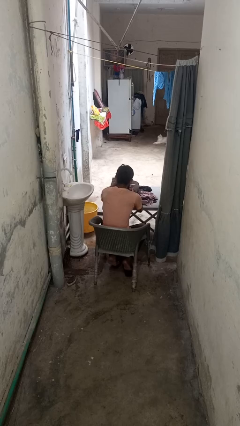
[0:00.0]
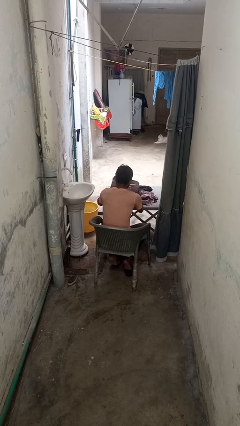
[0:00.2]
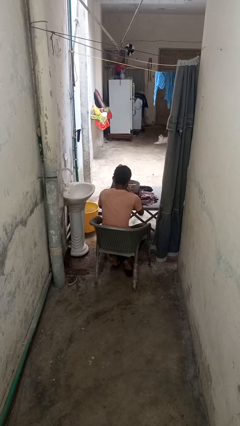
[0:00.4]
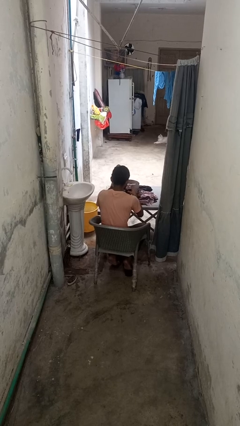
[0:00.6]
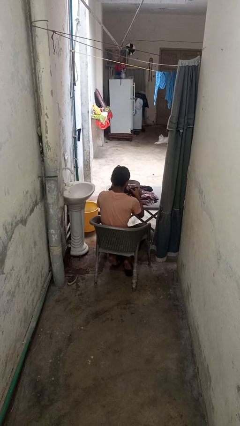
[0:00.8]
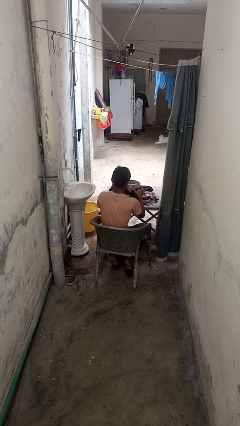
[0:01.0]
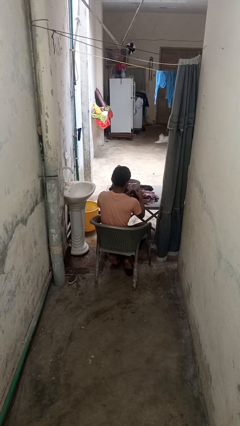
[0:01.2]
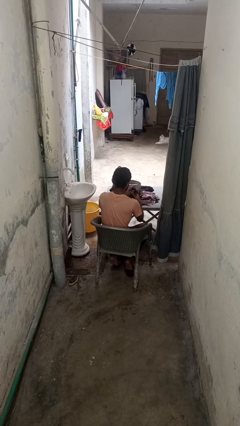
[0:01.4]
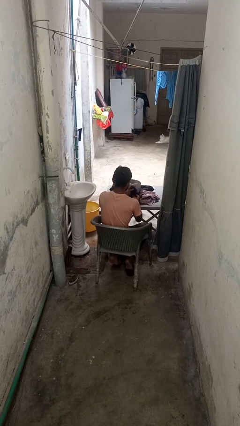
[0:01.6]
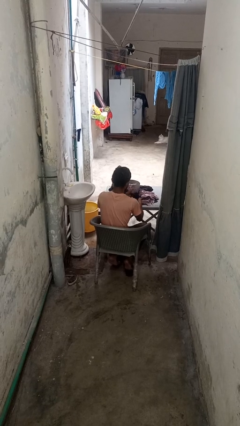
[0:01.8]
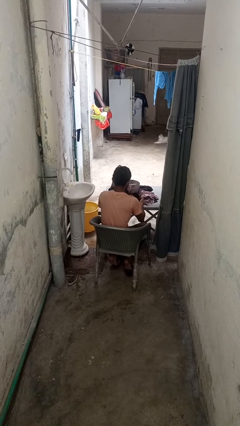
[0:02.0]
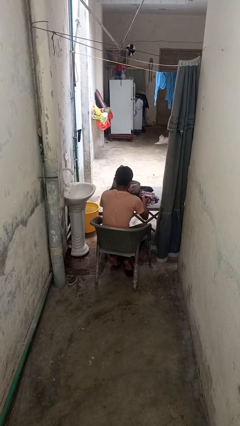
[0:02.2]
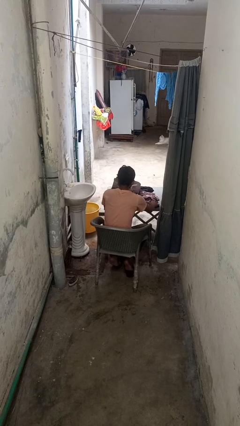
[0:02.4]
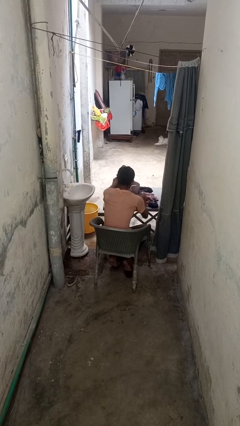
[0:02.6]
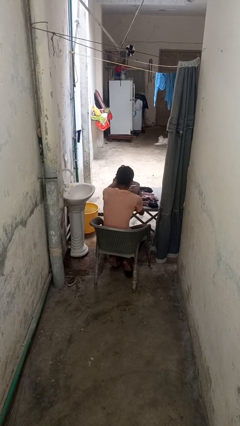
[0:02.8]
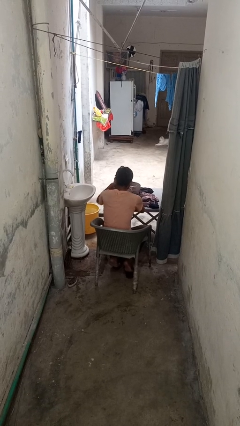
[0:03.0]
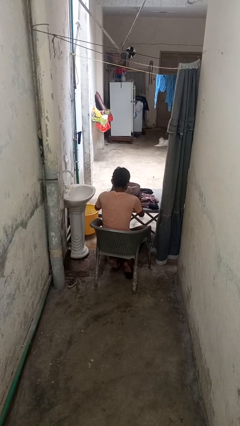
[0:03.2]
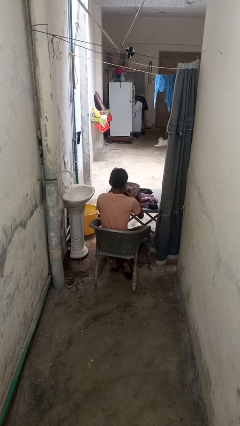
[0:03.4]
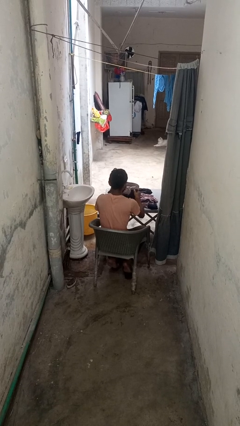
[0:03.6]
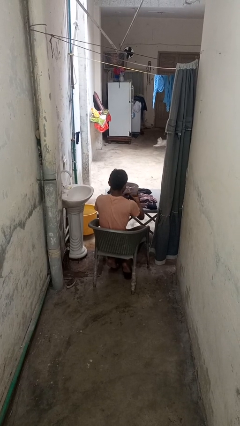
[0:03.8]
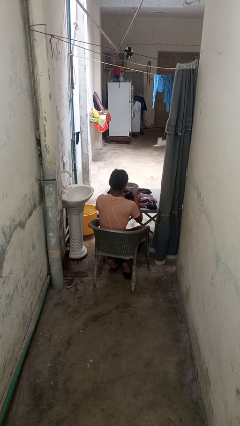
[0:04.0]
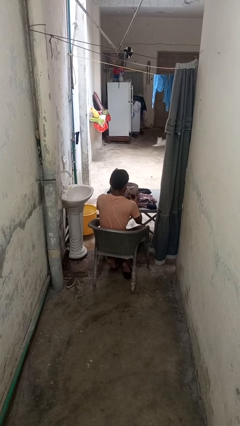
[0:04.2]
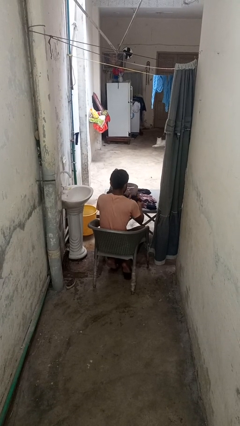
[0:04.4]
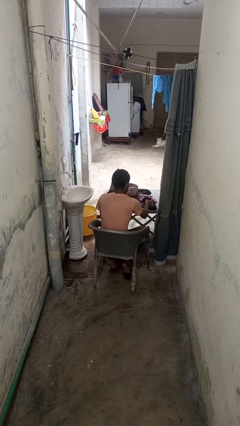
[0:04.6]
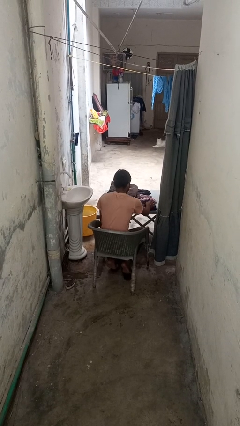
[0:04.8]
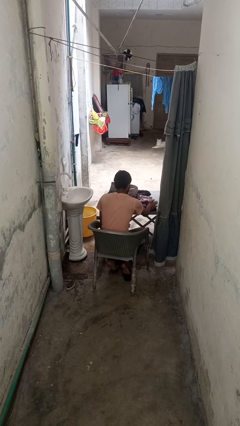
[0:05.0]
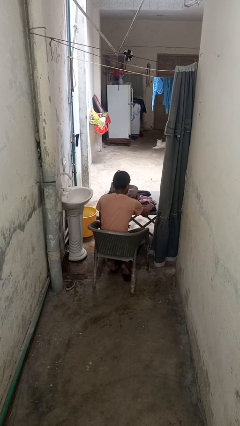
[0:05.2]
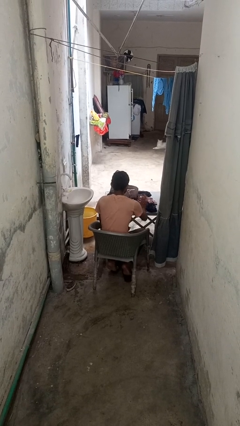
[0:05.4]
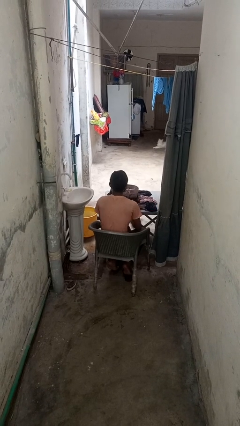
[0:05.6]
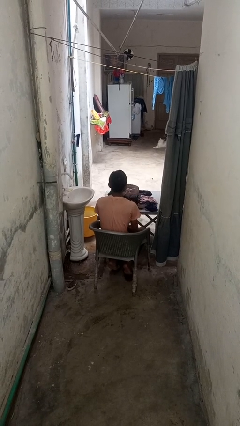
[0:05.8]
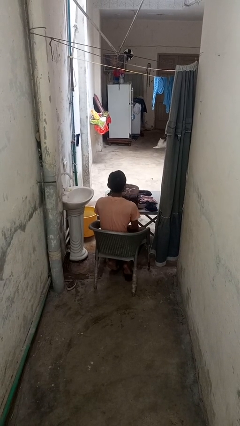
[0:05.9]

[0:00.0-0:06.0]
person folds socks

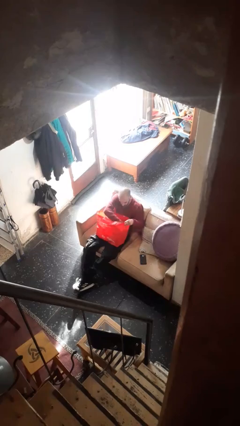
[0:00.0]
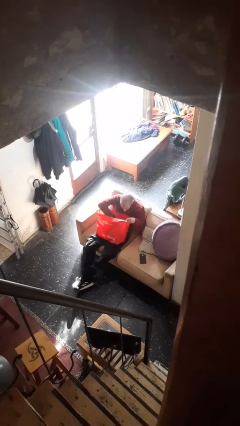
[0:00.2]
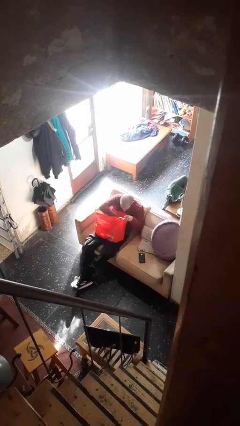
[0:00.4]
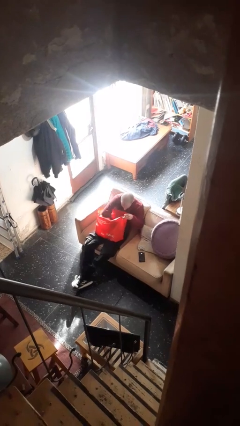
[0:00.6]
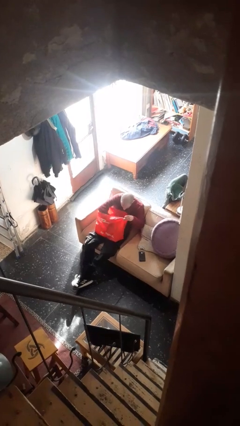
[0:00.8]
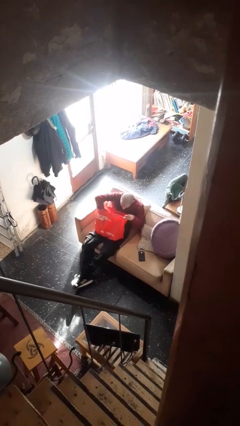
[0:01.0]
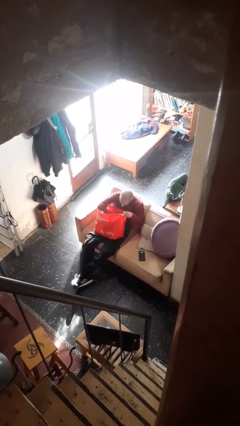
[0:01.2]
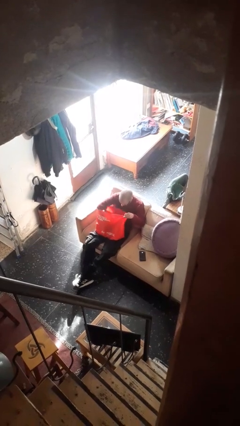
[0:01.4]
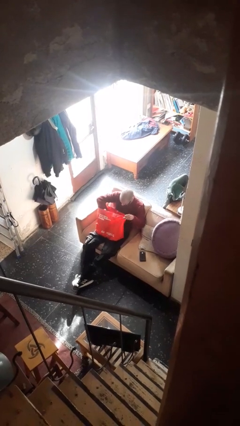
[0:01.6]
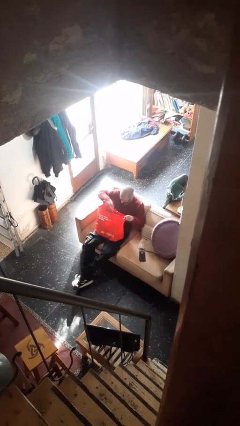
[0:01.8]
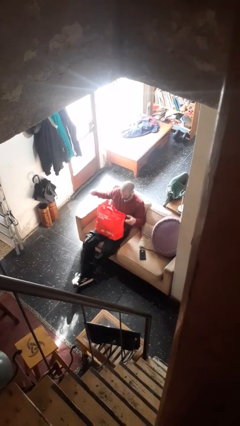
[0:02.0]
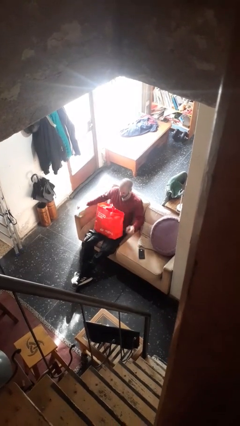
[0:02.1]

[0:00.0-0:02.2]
person searches in bag

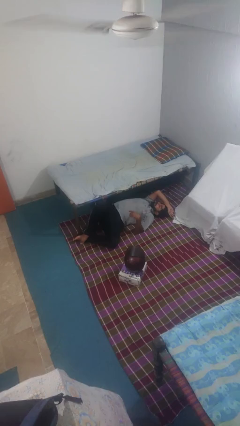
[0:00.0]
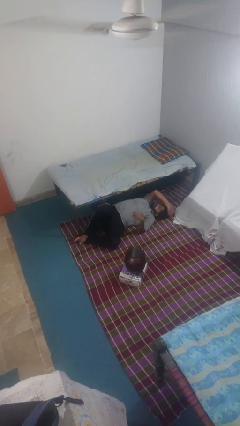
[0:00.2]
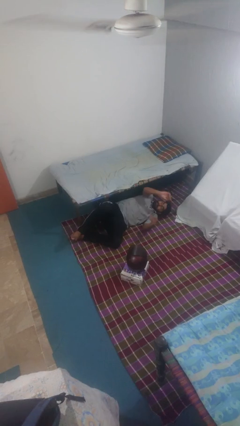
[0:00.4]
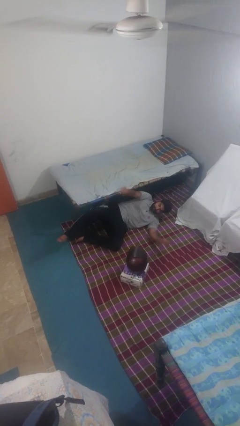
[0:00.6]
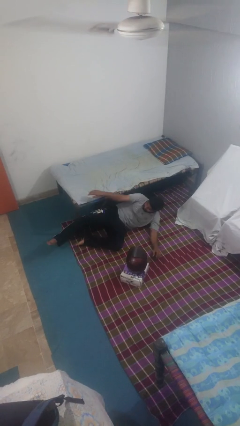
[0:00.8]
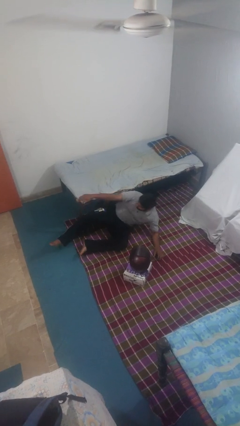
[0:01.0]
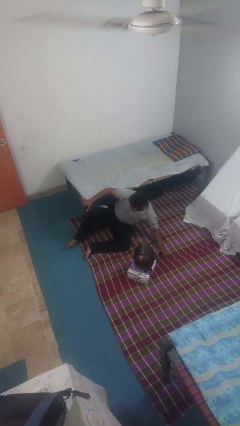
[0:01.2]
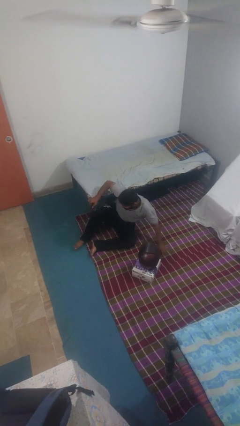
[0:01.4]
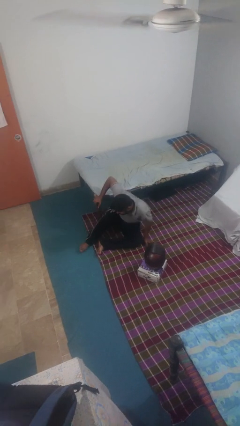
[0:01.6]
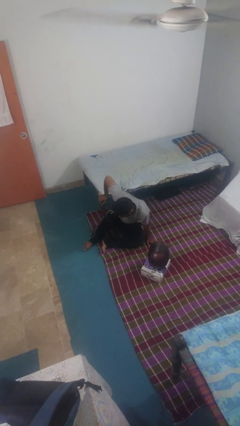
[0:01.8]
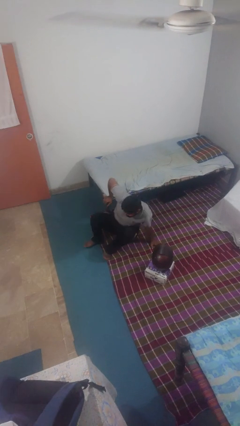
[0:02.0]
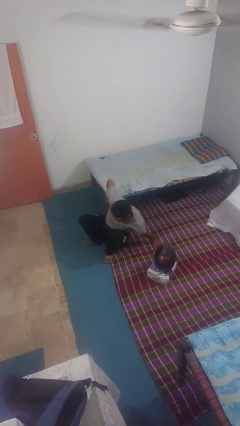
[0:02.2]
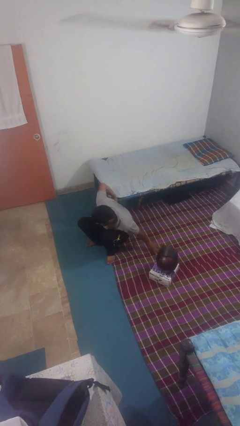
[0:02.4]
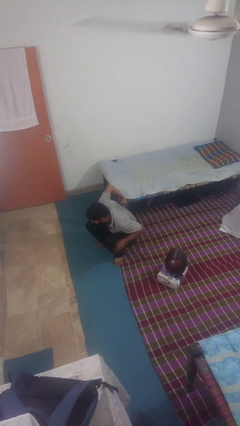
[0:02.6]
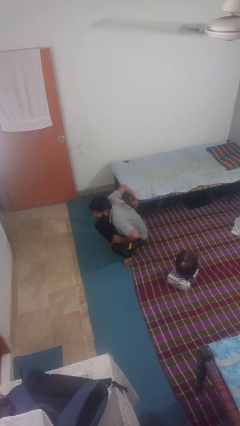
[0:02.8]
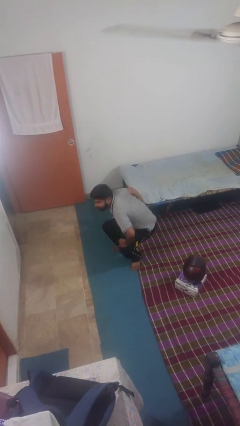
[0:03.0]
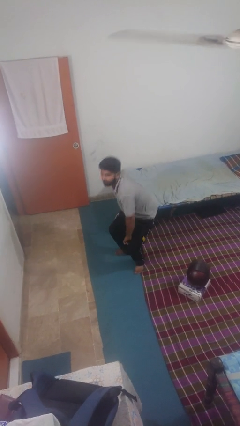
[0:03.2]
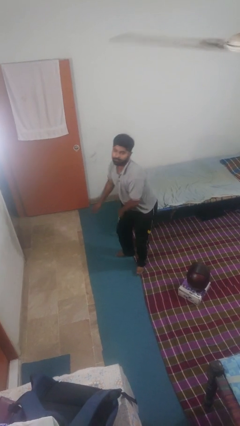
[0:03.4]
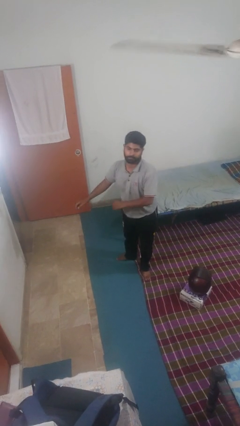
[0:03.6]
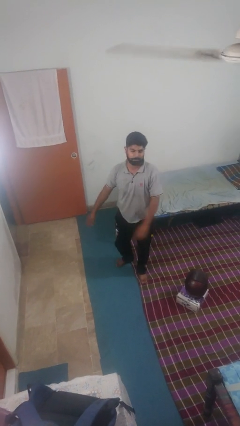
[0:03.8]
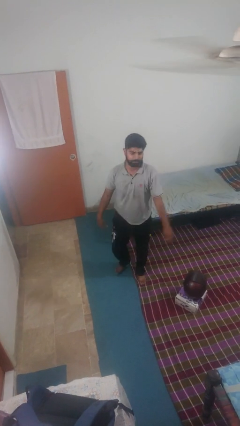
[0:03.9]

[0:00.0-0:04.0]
person stands up from floor

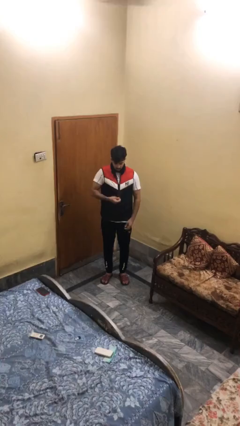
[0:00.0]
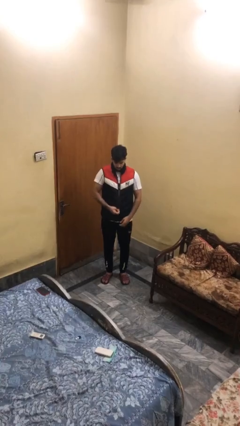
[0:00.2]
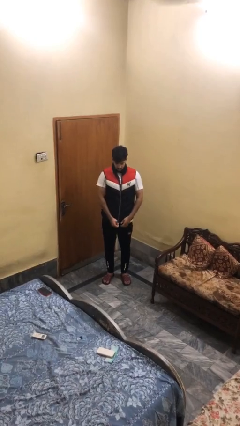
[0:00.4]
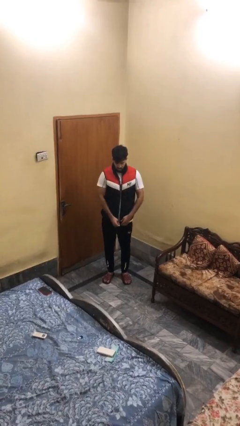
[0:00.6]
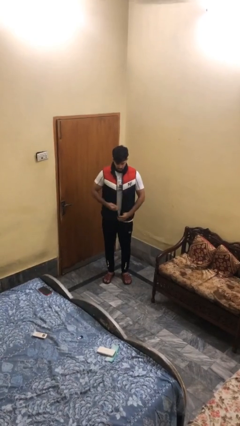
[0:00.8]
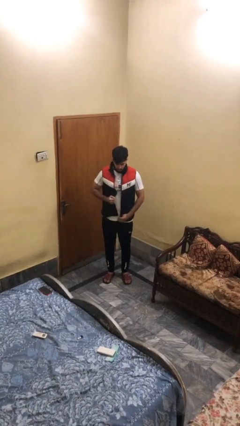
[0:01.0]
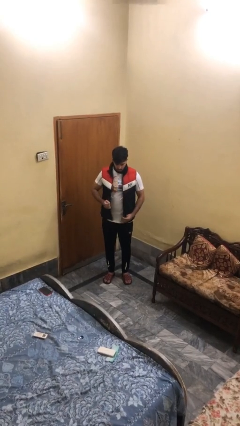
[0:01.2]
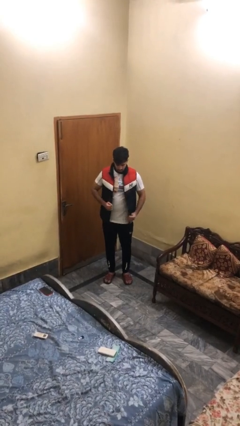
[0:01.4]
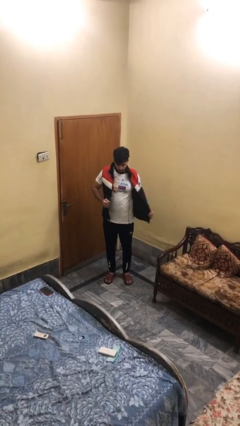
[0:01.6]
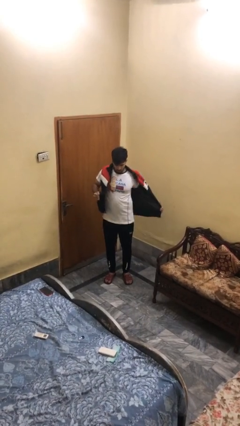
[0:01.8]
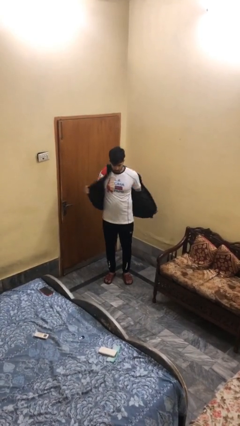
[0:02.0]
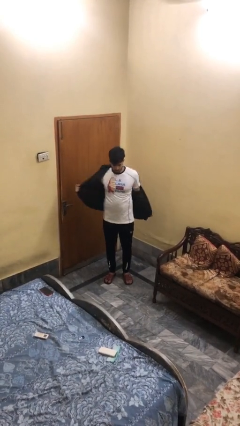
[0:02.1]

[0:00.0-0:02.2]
person unzips jacket

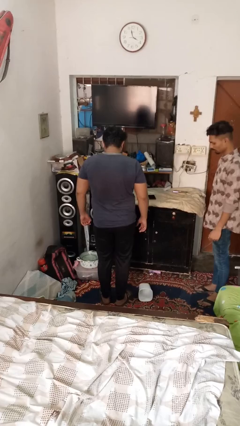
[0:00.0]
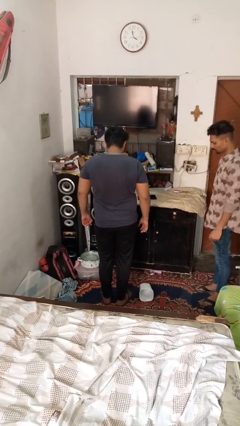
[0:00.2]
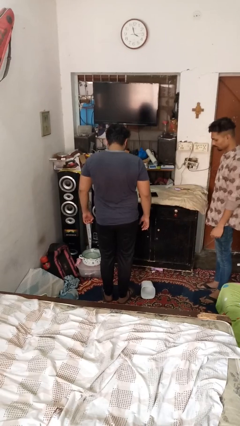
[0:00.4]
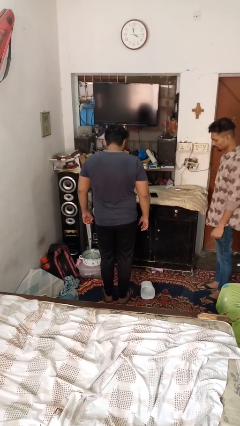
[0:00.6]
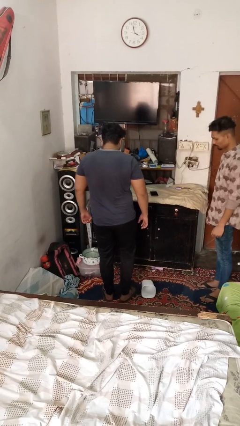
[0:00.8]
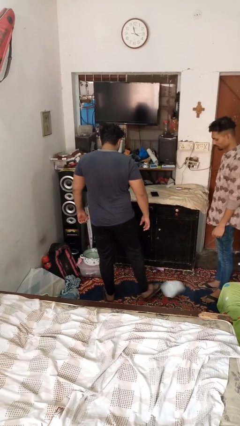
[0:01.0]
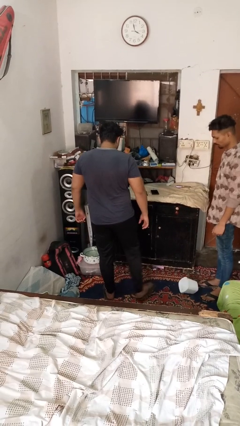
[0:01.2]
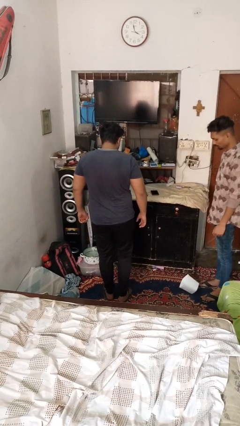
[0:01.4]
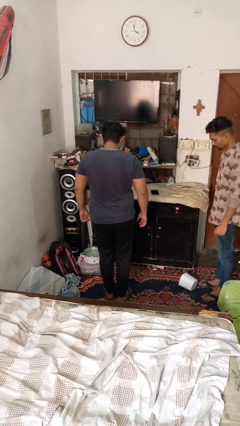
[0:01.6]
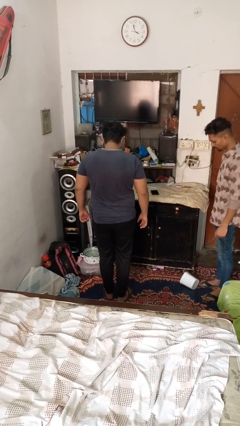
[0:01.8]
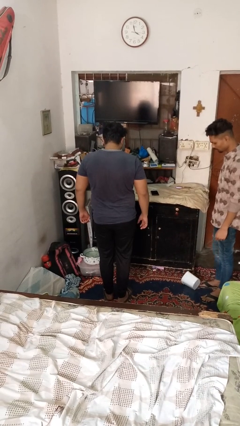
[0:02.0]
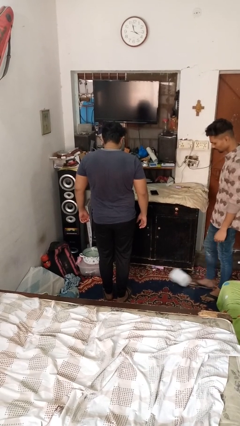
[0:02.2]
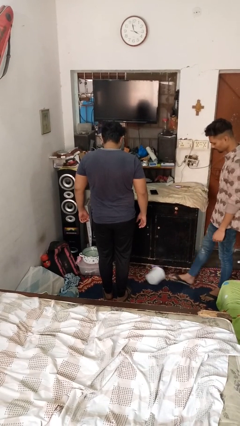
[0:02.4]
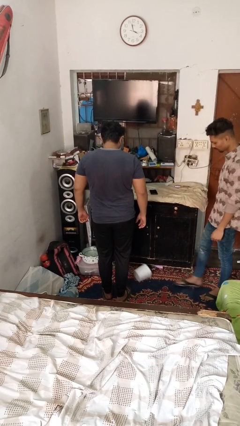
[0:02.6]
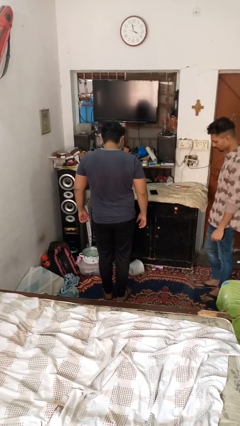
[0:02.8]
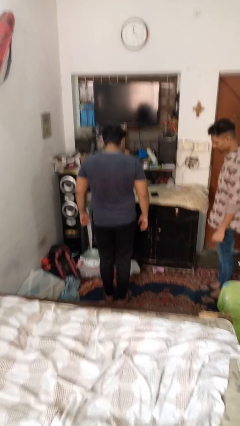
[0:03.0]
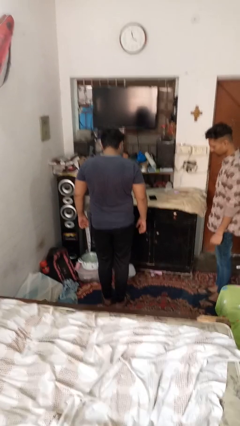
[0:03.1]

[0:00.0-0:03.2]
person kicks object to person

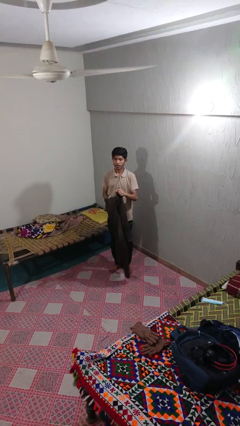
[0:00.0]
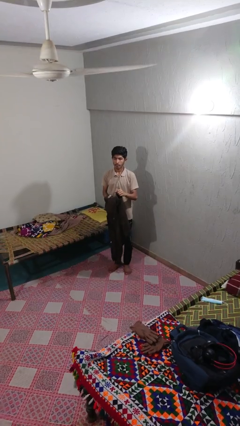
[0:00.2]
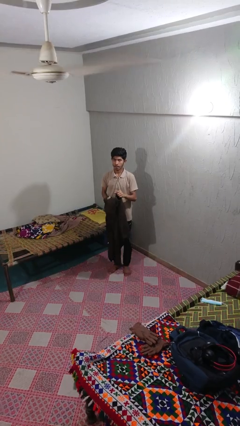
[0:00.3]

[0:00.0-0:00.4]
person puts on jacket
